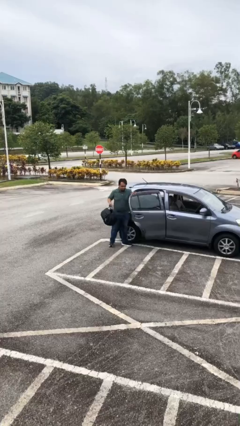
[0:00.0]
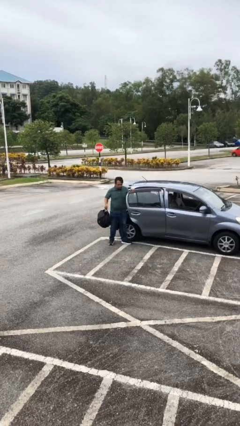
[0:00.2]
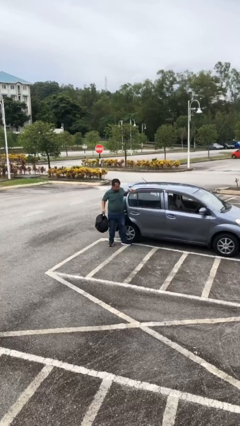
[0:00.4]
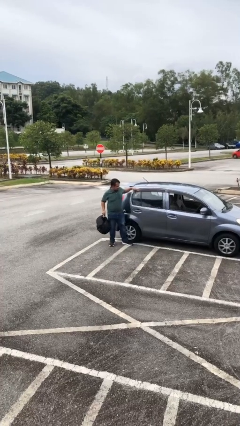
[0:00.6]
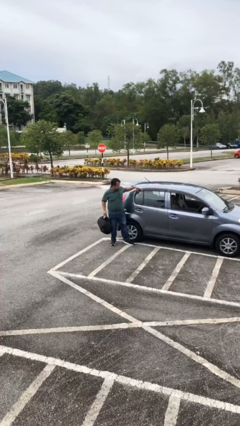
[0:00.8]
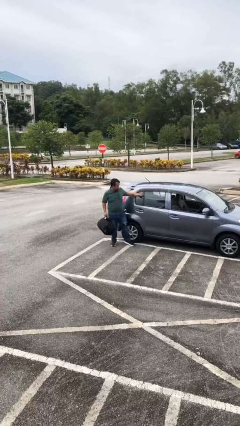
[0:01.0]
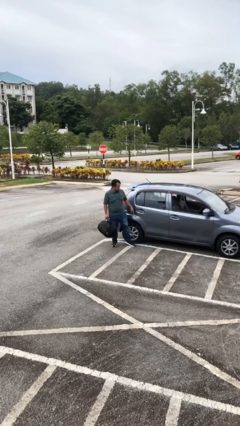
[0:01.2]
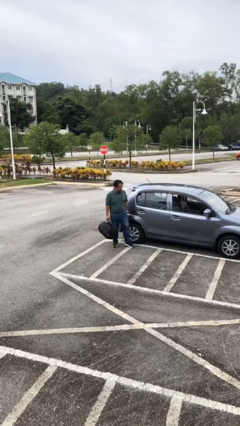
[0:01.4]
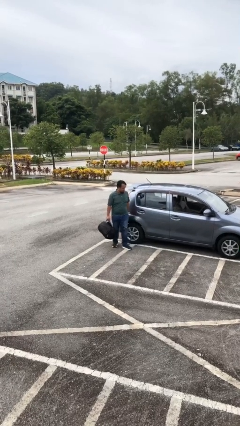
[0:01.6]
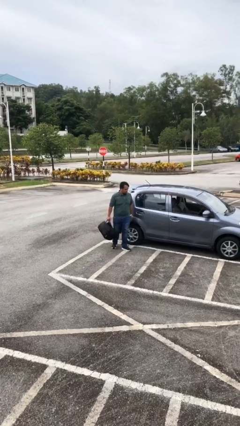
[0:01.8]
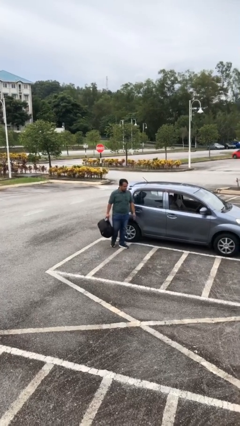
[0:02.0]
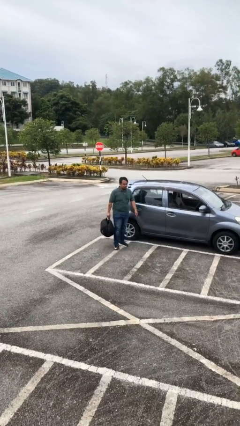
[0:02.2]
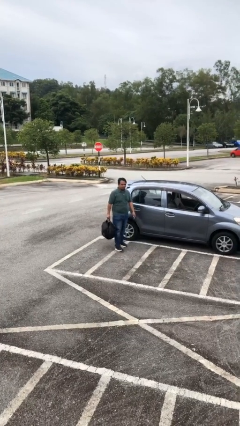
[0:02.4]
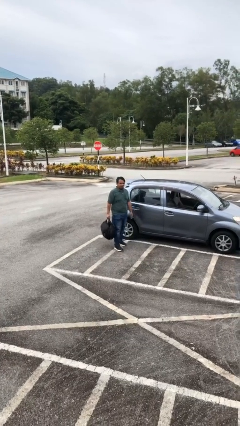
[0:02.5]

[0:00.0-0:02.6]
person closes car door

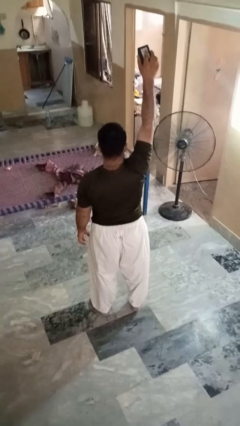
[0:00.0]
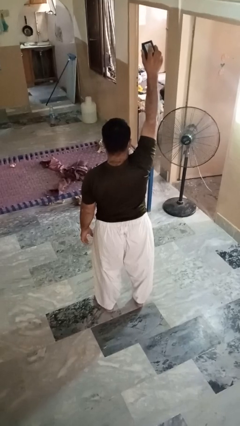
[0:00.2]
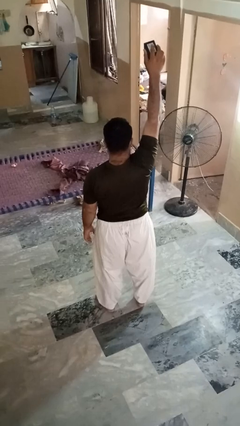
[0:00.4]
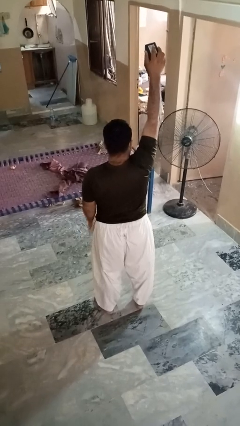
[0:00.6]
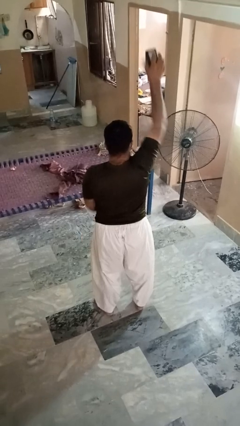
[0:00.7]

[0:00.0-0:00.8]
person drops object

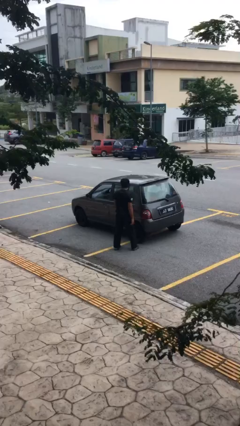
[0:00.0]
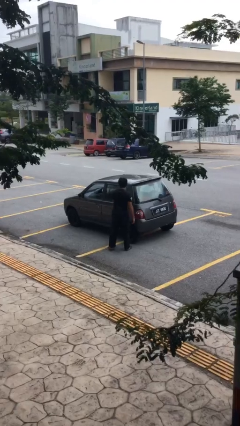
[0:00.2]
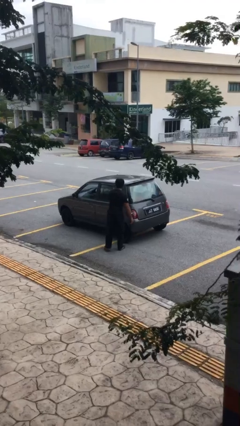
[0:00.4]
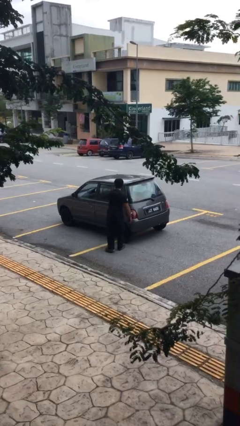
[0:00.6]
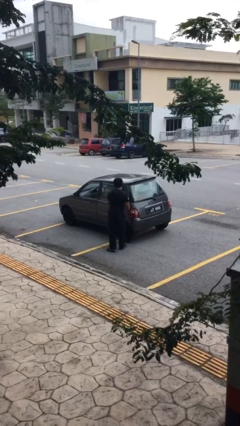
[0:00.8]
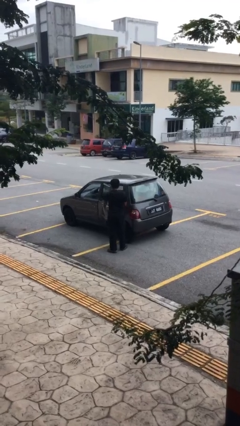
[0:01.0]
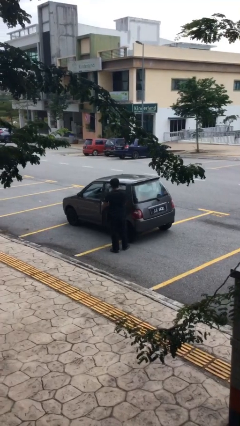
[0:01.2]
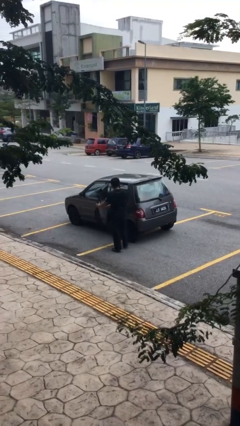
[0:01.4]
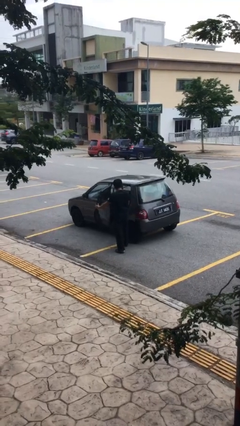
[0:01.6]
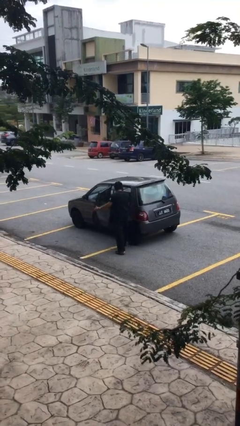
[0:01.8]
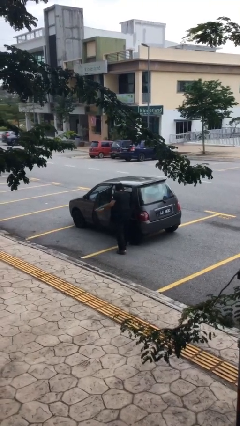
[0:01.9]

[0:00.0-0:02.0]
person opens car door

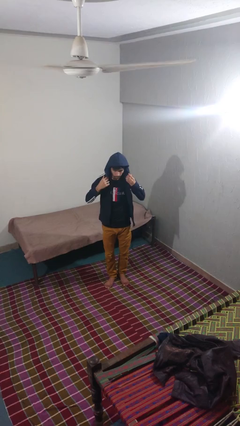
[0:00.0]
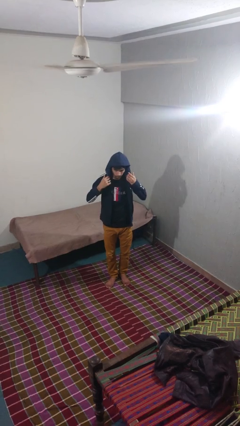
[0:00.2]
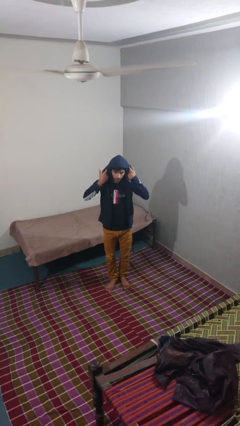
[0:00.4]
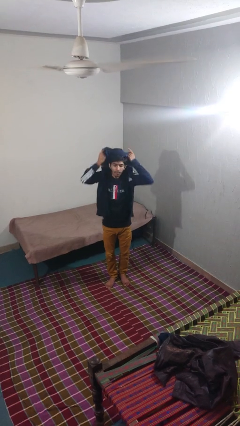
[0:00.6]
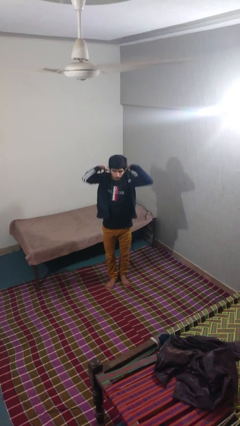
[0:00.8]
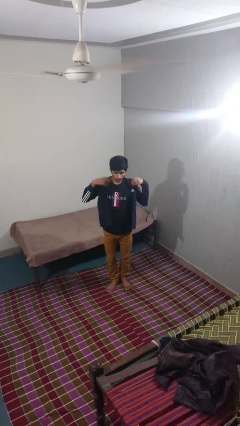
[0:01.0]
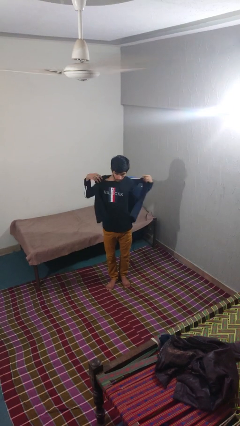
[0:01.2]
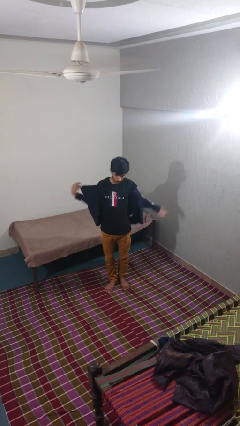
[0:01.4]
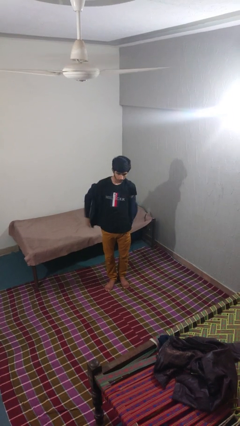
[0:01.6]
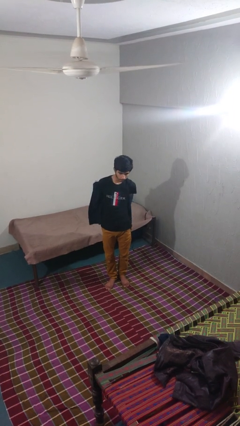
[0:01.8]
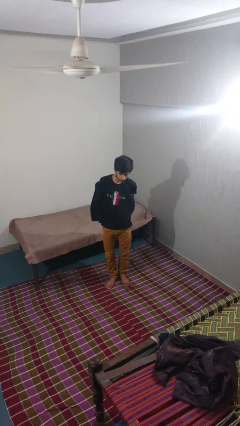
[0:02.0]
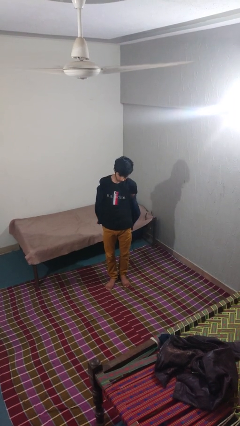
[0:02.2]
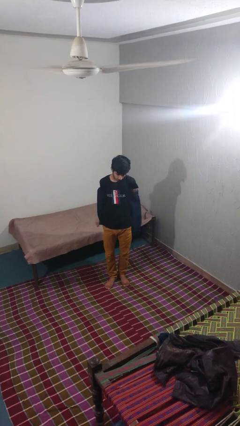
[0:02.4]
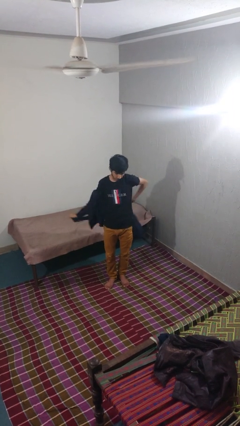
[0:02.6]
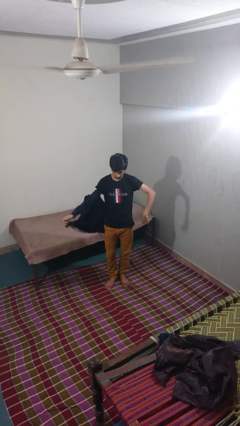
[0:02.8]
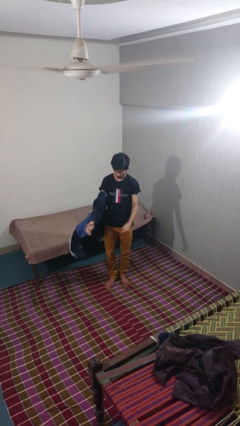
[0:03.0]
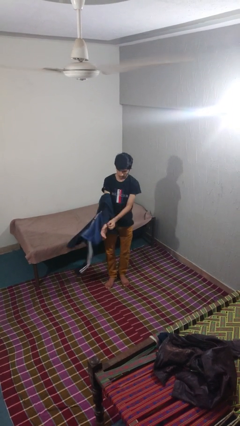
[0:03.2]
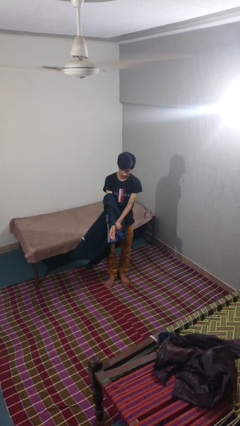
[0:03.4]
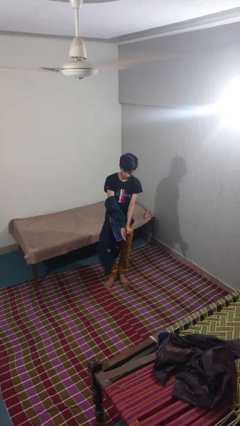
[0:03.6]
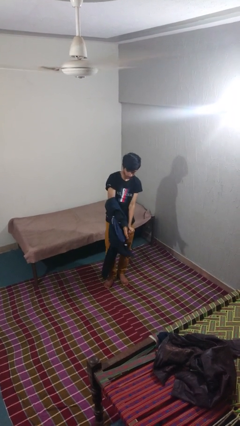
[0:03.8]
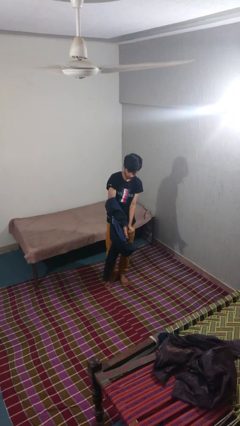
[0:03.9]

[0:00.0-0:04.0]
person takes off hoodie

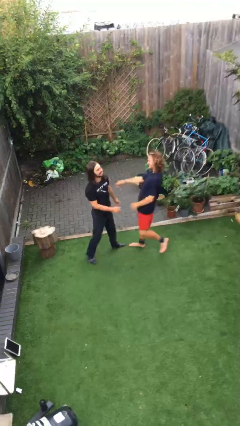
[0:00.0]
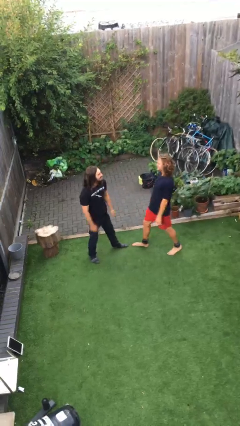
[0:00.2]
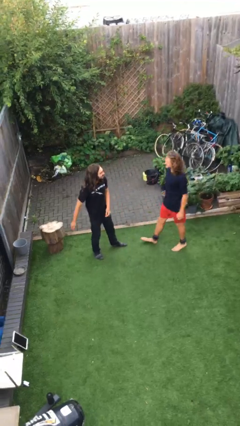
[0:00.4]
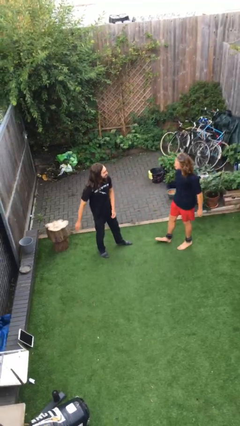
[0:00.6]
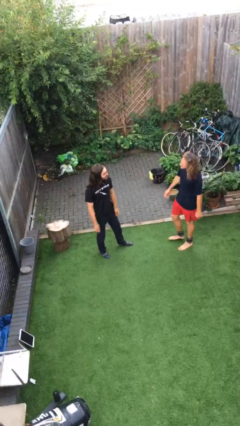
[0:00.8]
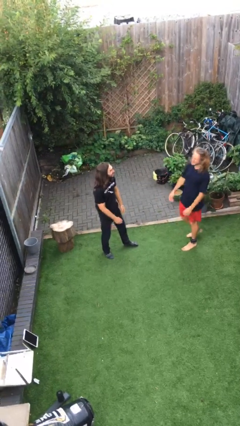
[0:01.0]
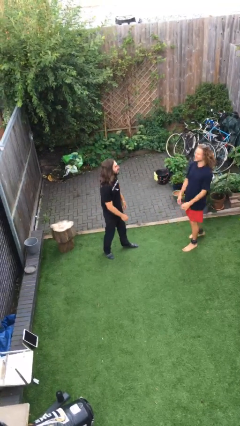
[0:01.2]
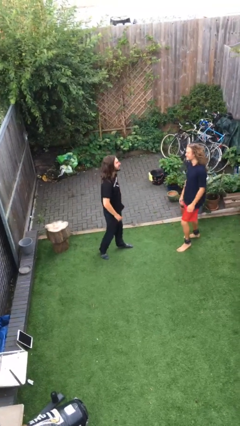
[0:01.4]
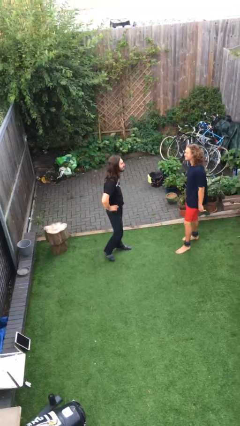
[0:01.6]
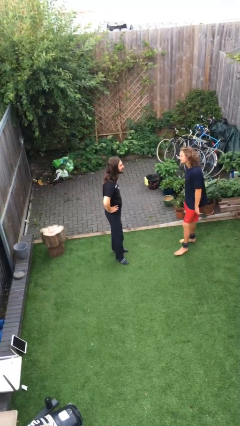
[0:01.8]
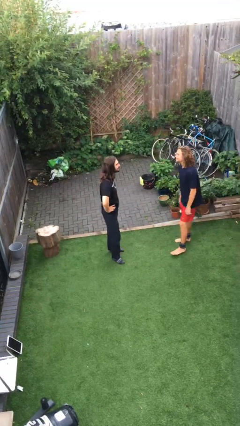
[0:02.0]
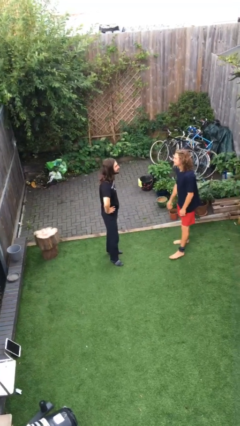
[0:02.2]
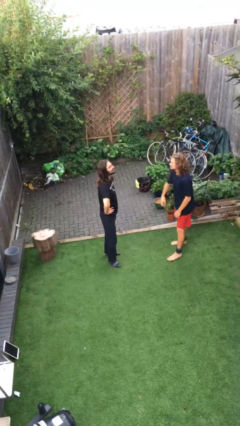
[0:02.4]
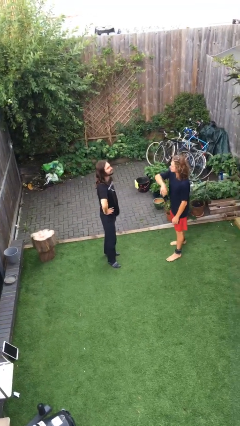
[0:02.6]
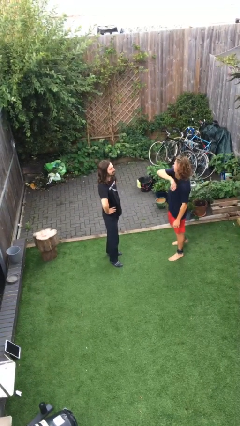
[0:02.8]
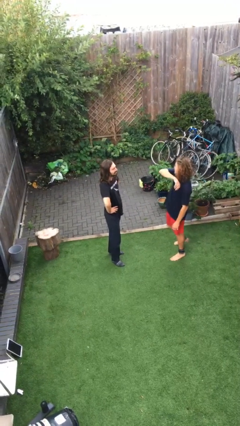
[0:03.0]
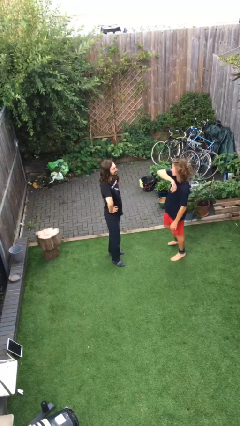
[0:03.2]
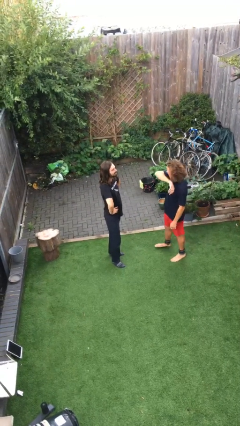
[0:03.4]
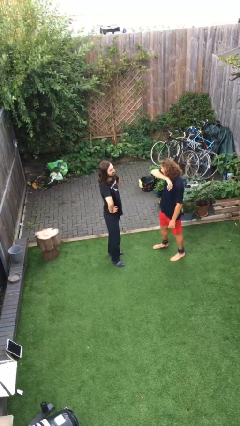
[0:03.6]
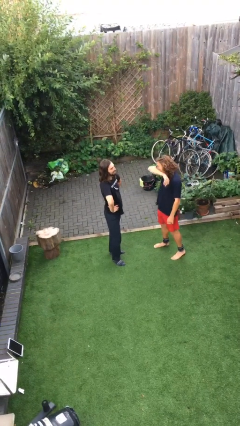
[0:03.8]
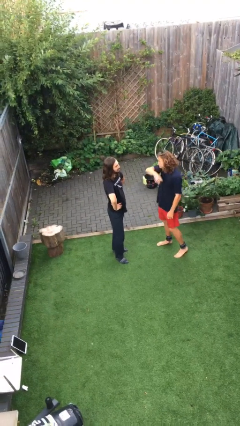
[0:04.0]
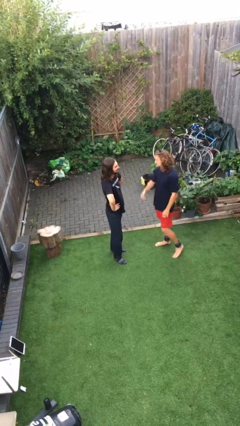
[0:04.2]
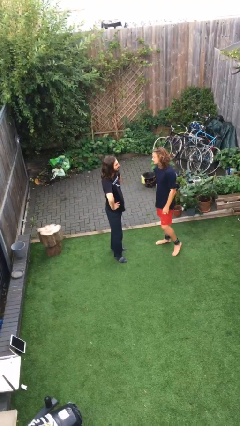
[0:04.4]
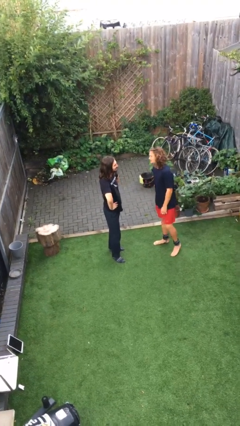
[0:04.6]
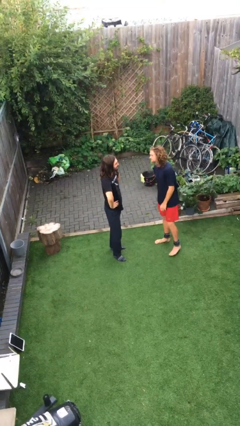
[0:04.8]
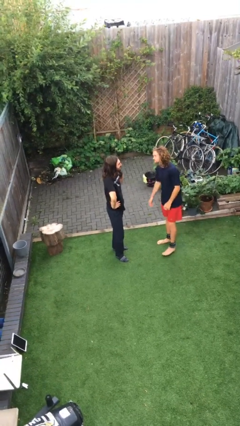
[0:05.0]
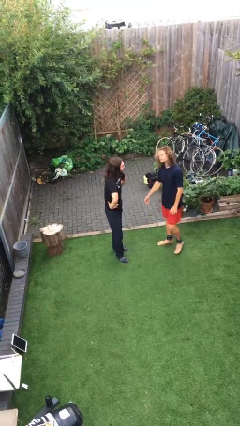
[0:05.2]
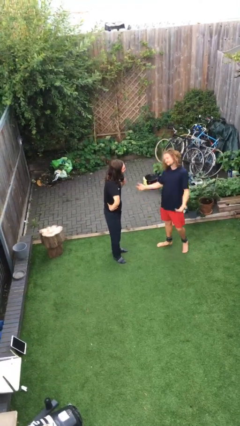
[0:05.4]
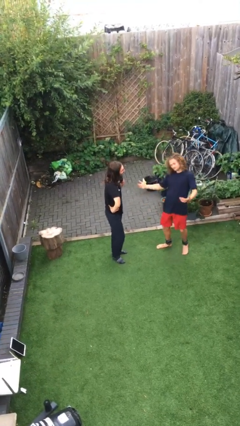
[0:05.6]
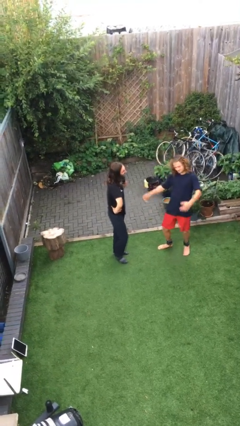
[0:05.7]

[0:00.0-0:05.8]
person talks to person

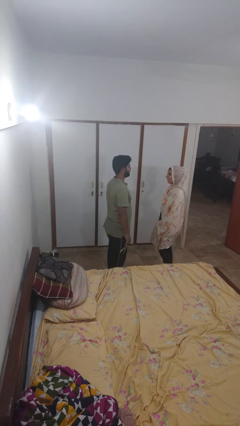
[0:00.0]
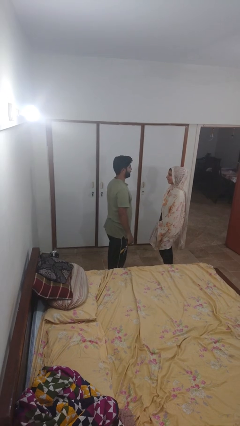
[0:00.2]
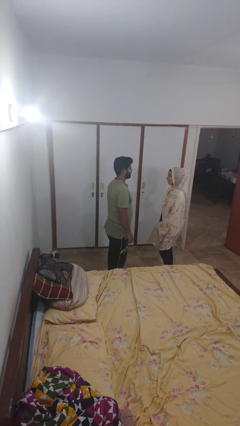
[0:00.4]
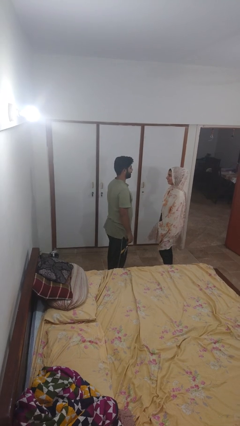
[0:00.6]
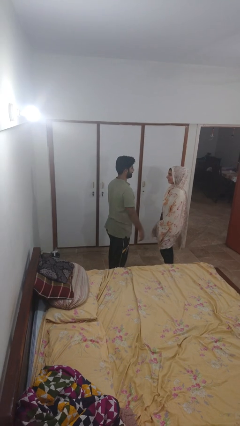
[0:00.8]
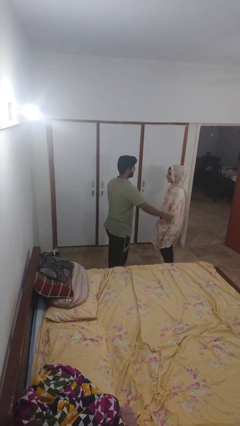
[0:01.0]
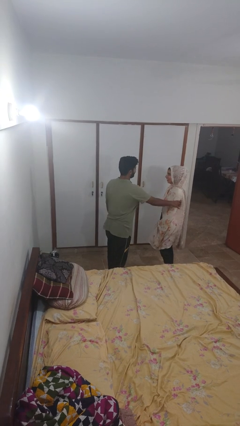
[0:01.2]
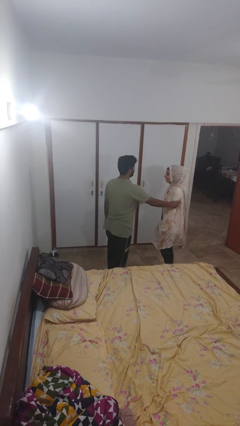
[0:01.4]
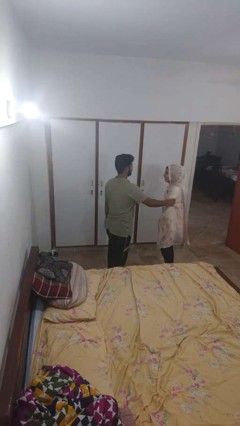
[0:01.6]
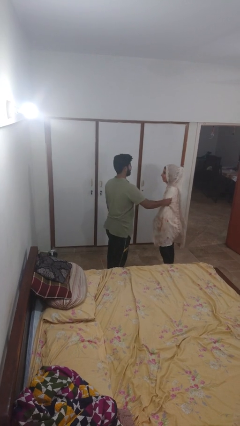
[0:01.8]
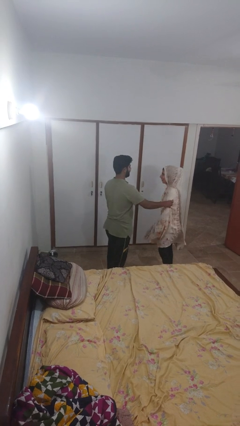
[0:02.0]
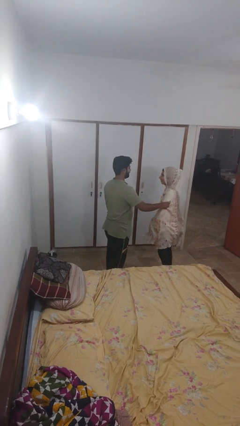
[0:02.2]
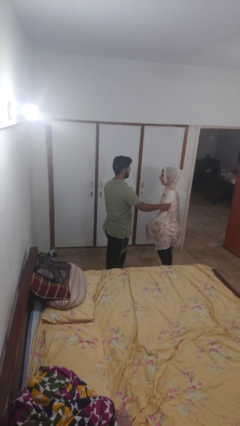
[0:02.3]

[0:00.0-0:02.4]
person grabs person by bicep
